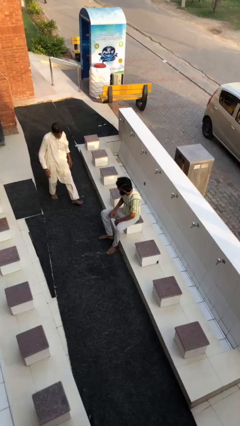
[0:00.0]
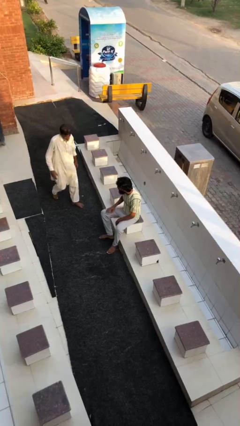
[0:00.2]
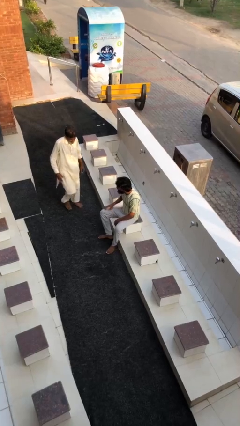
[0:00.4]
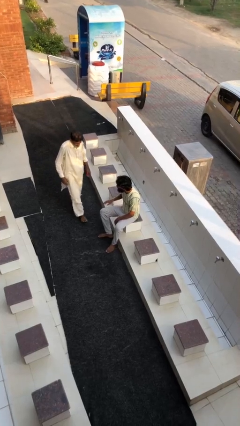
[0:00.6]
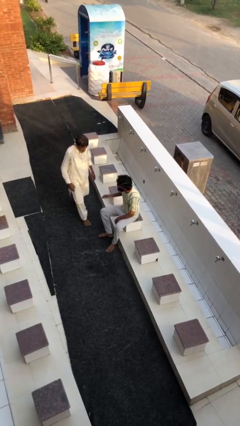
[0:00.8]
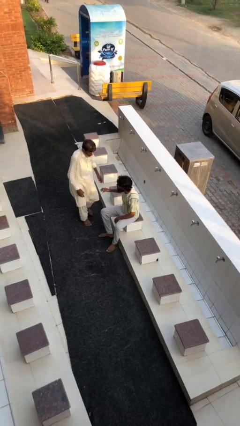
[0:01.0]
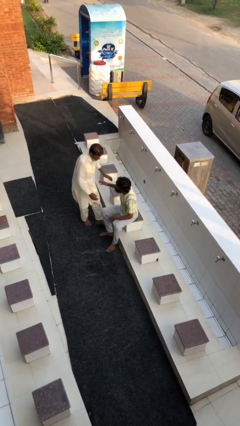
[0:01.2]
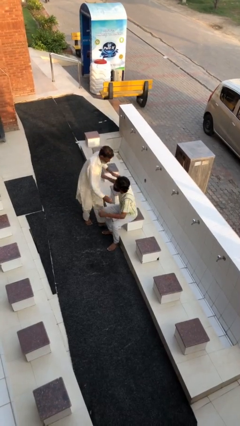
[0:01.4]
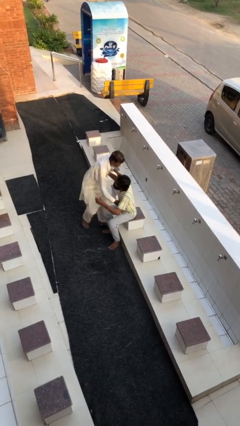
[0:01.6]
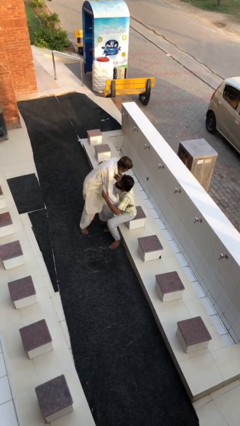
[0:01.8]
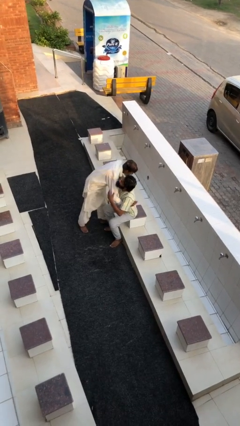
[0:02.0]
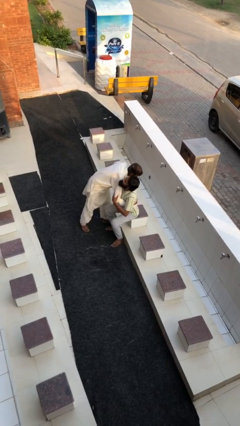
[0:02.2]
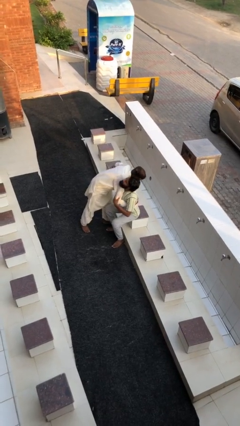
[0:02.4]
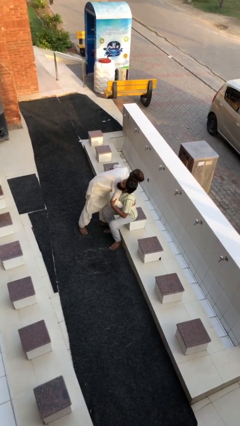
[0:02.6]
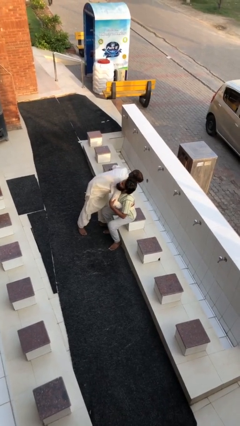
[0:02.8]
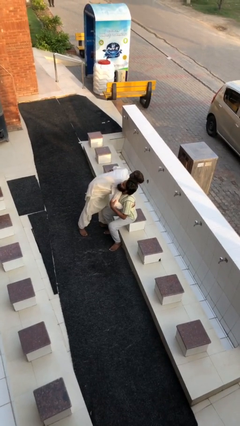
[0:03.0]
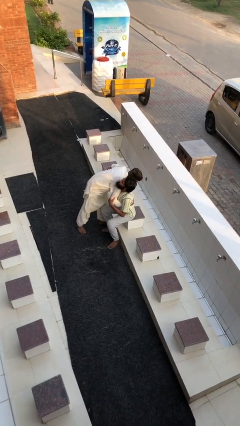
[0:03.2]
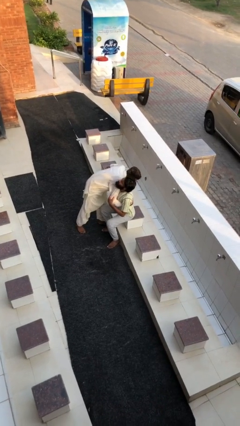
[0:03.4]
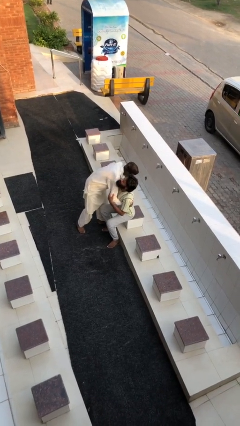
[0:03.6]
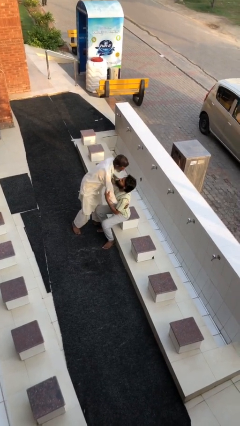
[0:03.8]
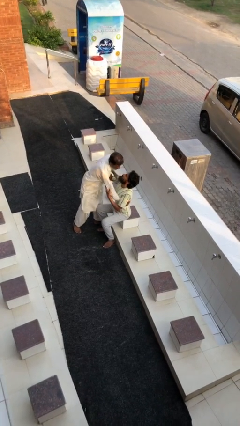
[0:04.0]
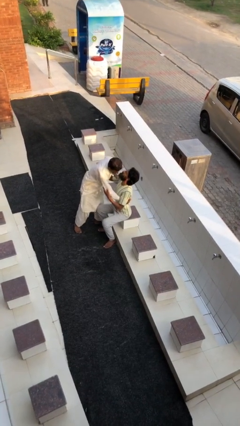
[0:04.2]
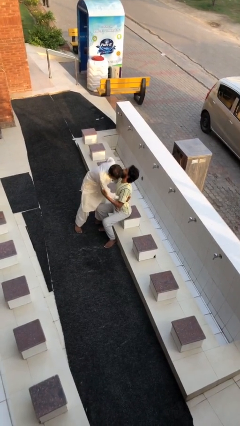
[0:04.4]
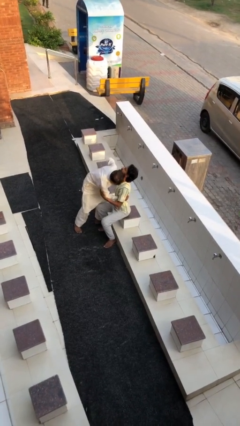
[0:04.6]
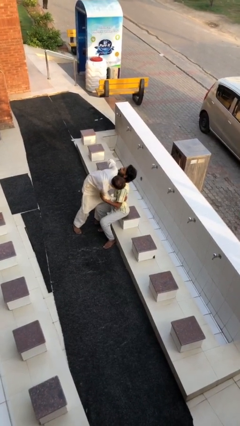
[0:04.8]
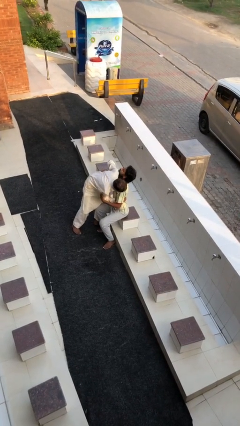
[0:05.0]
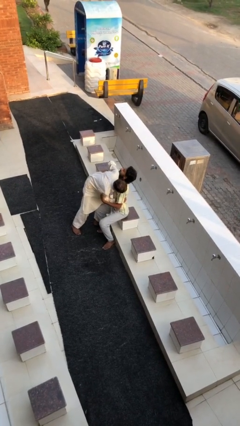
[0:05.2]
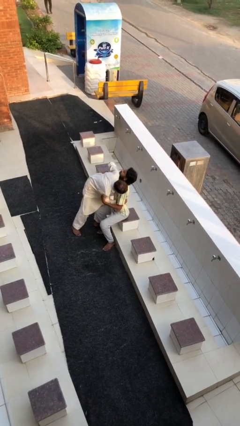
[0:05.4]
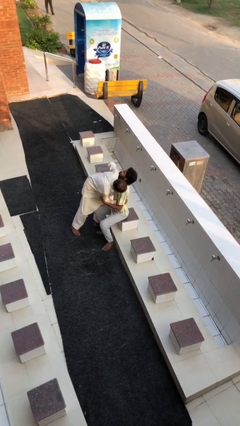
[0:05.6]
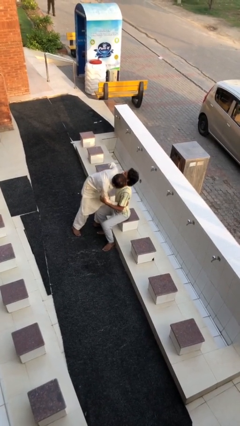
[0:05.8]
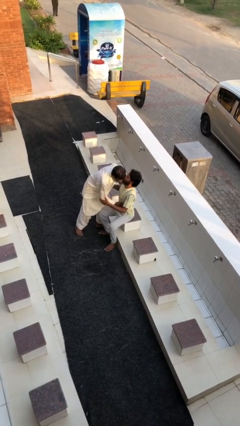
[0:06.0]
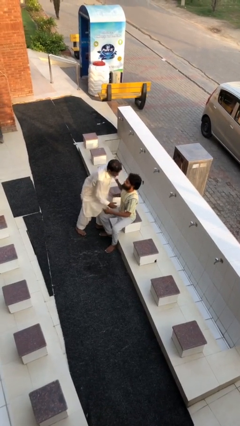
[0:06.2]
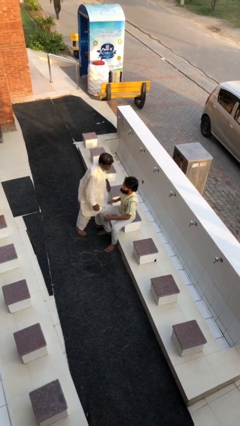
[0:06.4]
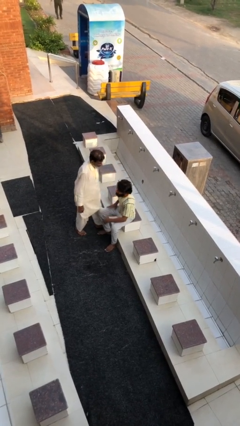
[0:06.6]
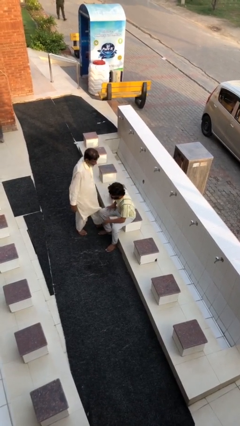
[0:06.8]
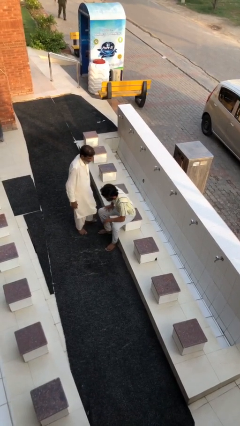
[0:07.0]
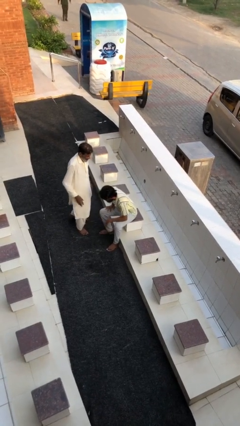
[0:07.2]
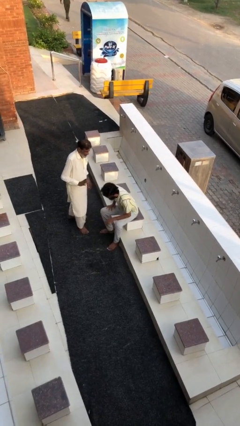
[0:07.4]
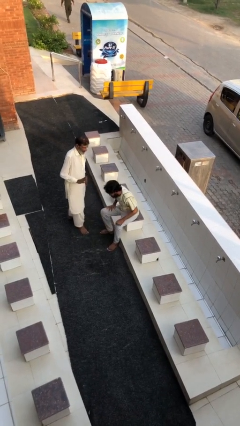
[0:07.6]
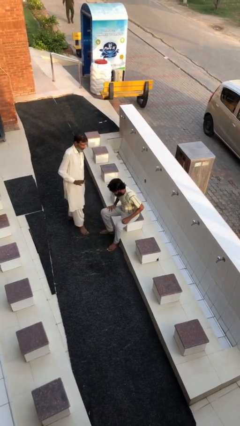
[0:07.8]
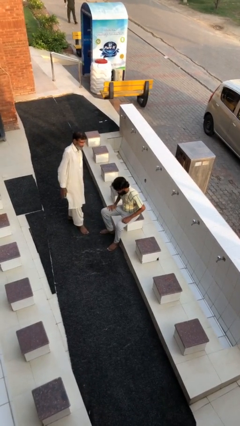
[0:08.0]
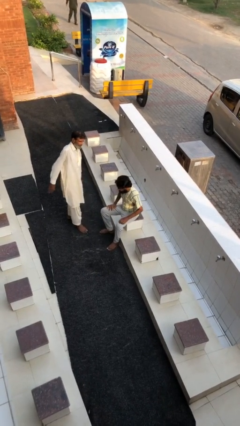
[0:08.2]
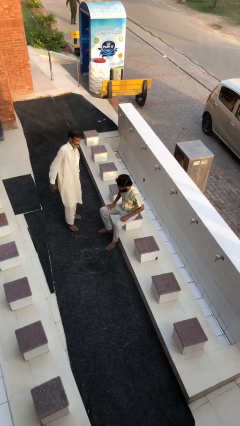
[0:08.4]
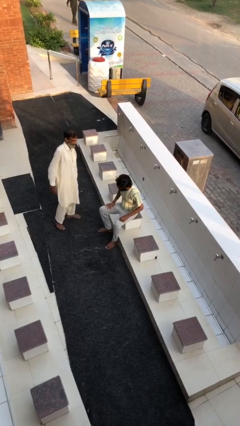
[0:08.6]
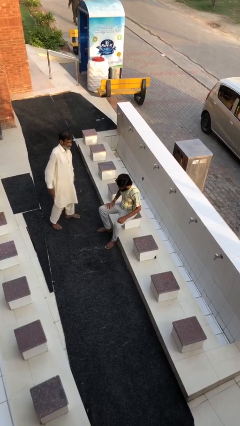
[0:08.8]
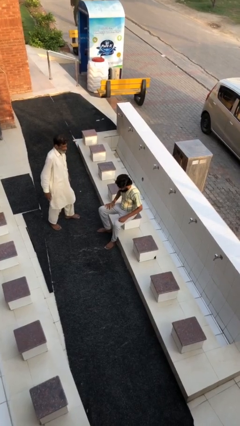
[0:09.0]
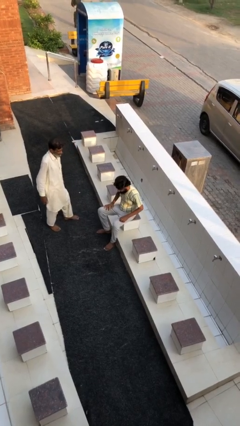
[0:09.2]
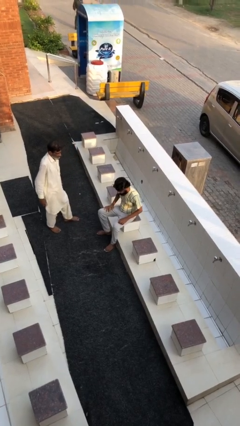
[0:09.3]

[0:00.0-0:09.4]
person embraces person

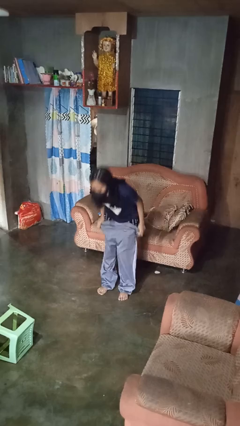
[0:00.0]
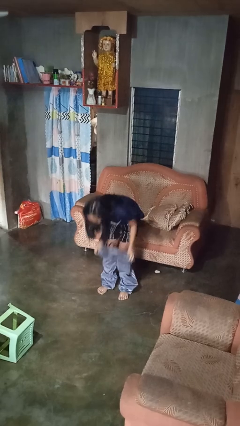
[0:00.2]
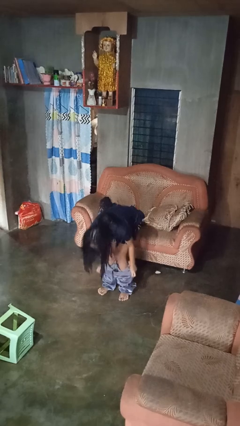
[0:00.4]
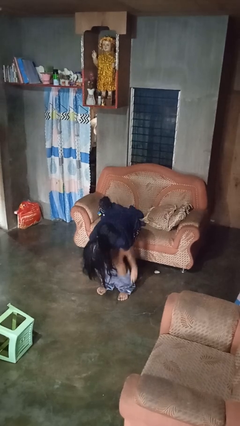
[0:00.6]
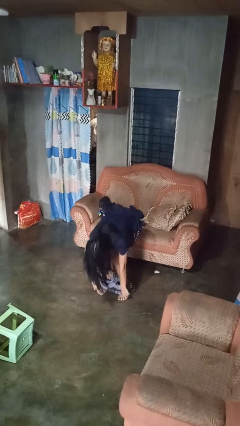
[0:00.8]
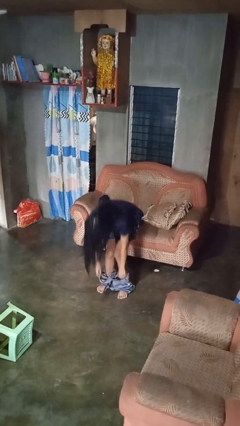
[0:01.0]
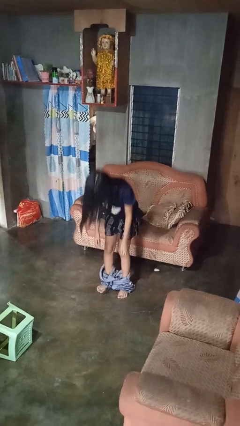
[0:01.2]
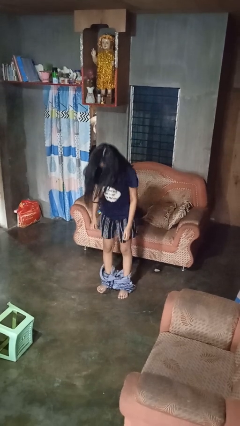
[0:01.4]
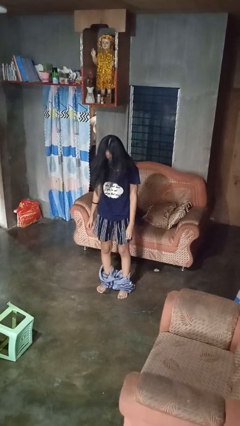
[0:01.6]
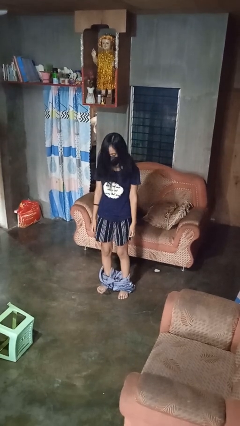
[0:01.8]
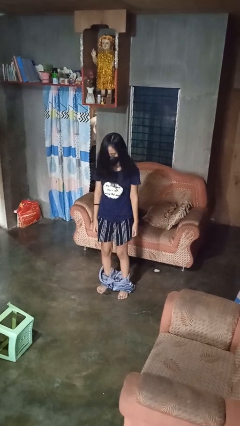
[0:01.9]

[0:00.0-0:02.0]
person takes off pants

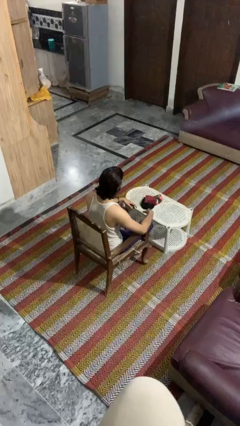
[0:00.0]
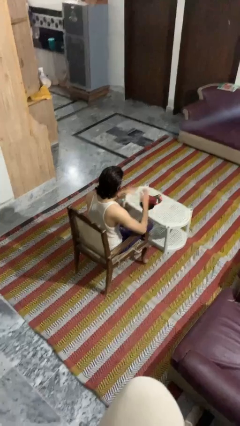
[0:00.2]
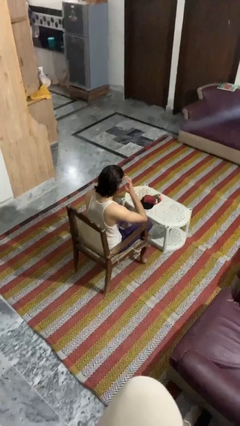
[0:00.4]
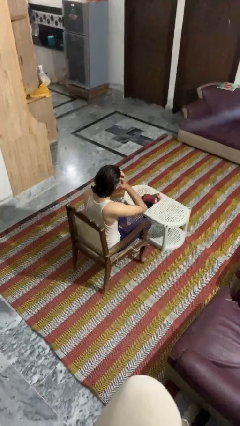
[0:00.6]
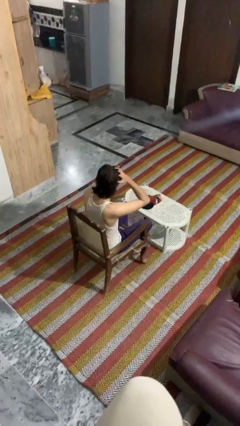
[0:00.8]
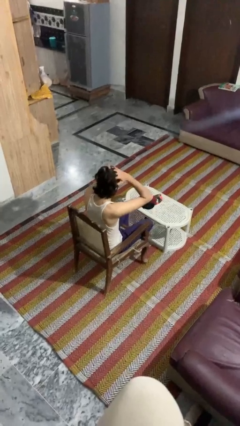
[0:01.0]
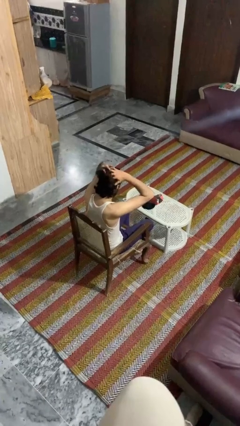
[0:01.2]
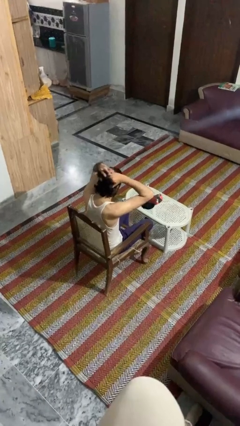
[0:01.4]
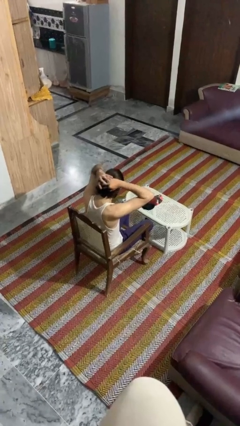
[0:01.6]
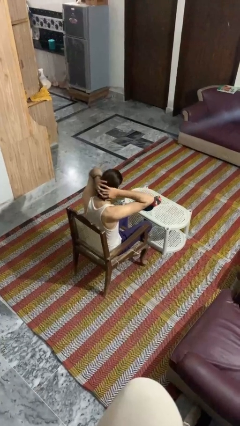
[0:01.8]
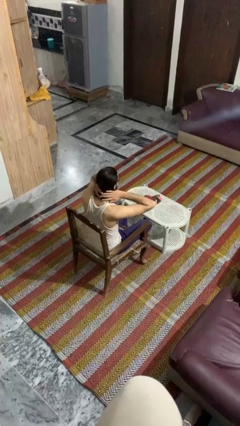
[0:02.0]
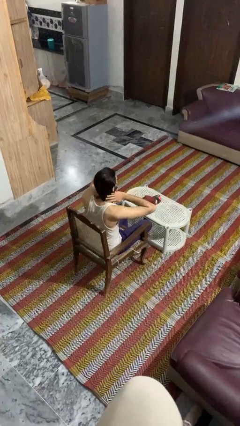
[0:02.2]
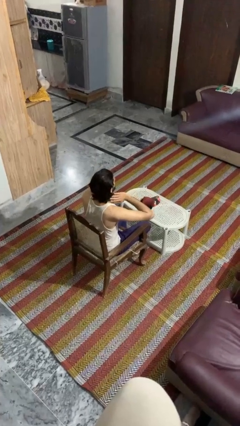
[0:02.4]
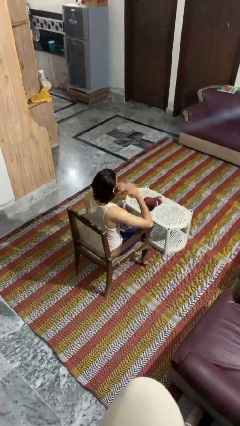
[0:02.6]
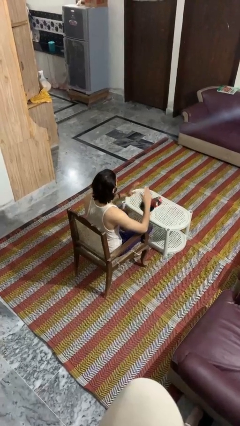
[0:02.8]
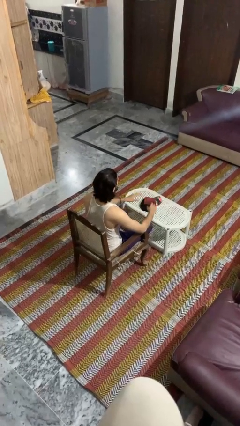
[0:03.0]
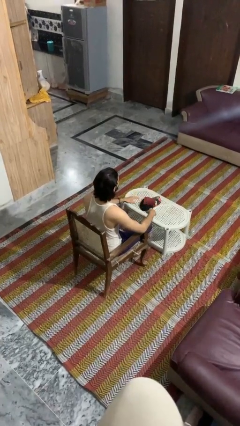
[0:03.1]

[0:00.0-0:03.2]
person strokes hair

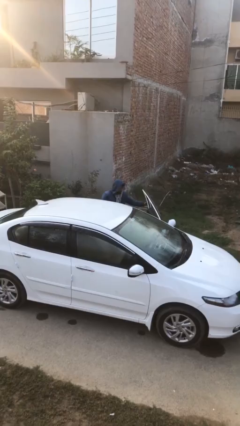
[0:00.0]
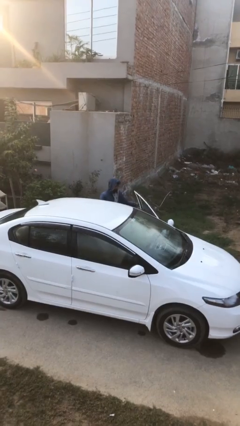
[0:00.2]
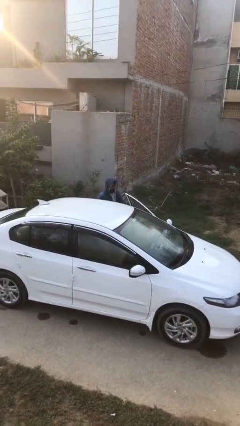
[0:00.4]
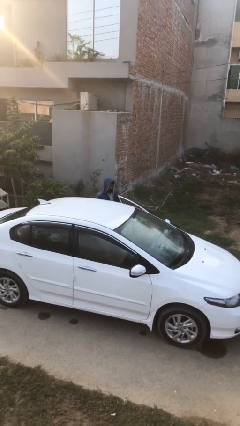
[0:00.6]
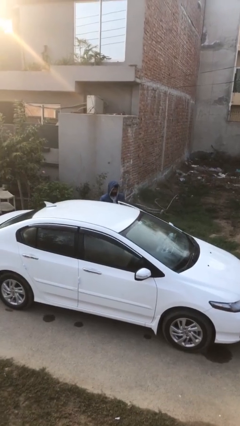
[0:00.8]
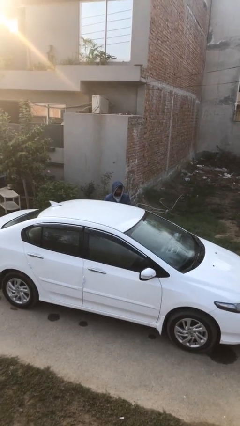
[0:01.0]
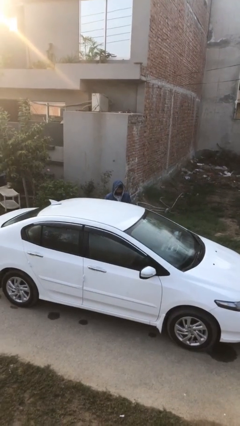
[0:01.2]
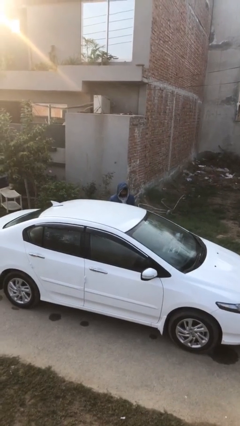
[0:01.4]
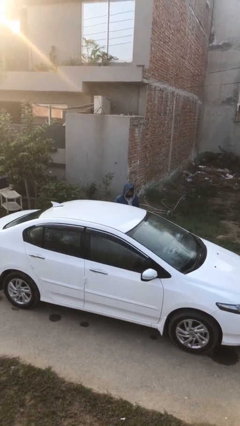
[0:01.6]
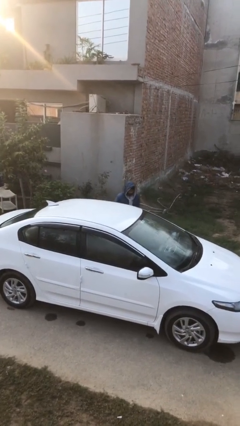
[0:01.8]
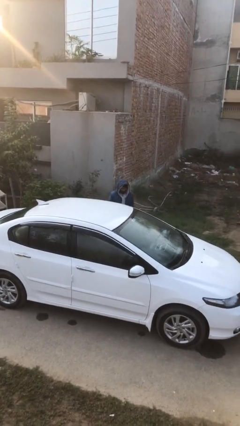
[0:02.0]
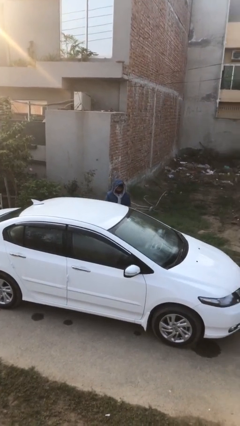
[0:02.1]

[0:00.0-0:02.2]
person closes car door

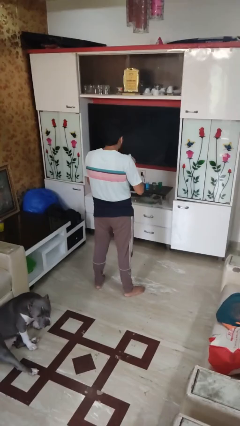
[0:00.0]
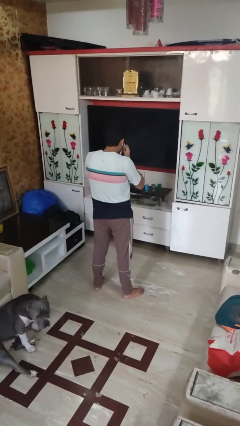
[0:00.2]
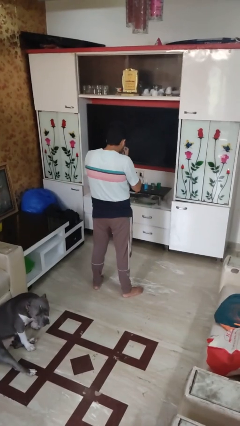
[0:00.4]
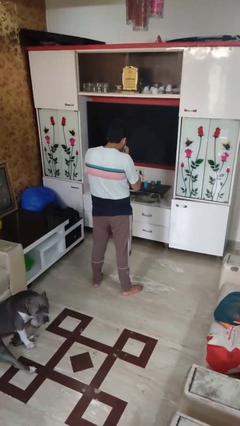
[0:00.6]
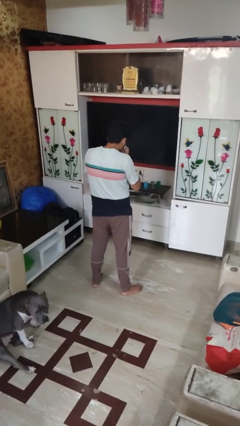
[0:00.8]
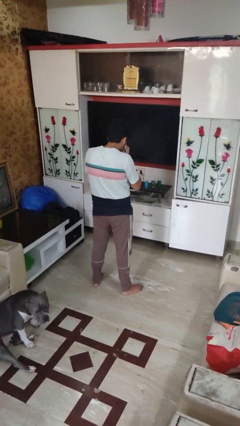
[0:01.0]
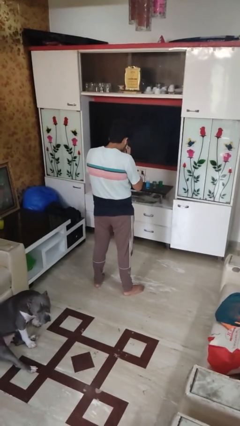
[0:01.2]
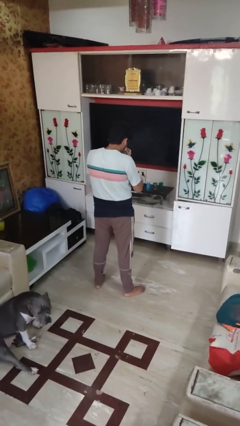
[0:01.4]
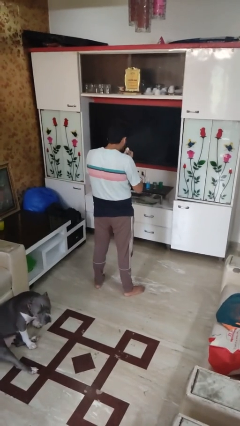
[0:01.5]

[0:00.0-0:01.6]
person blows nose
